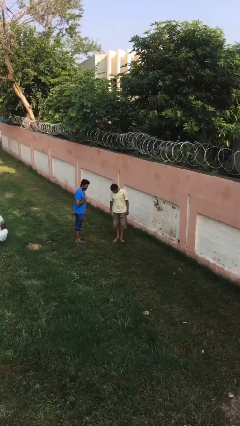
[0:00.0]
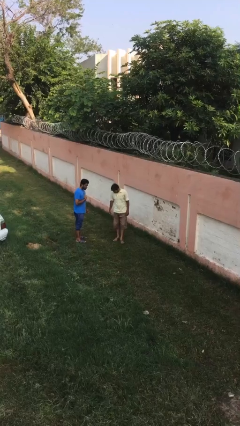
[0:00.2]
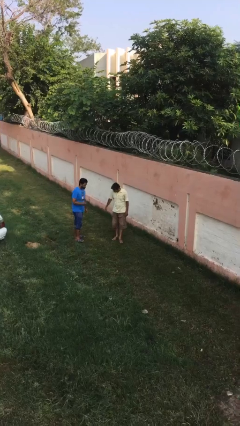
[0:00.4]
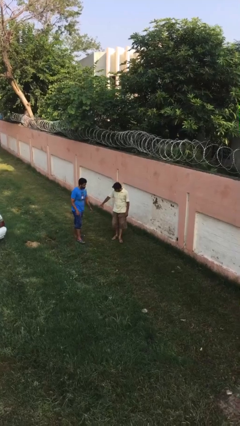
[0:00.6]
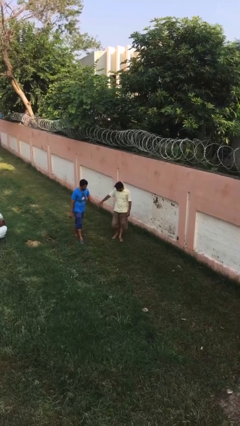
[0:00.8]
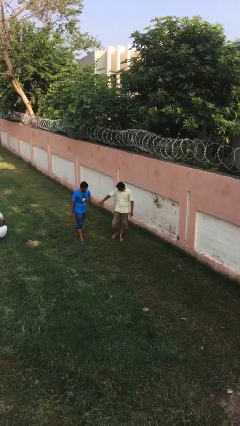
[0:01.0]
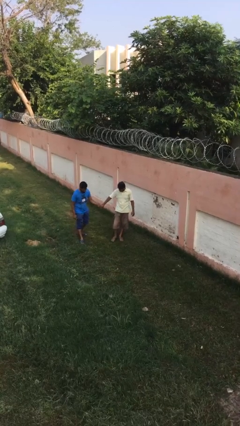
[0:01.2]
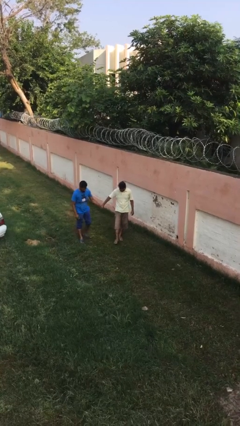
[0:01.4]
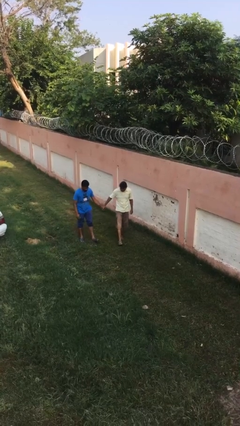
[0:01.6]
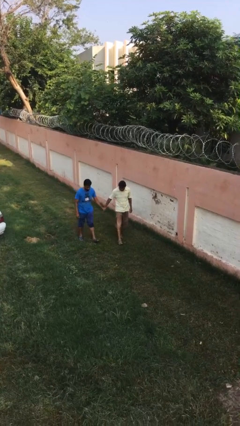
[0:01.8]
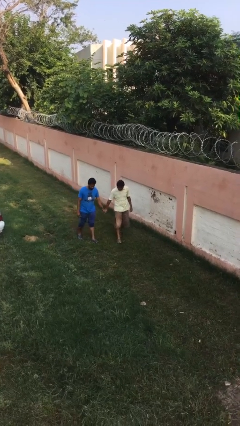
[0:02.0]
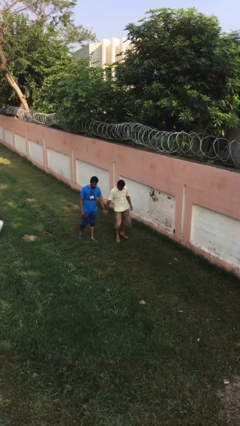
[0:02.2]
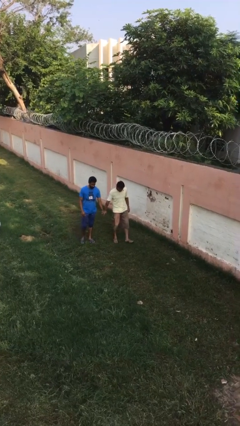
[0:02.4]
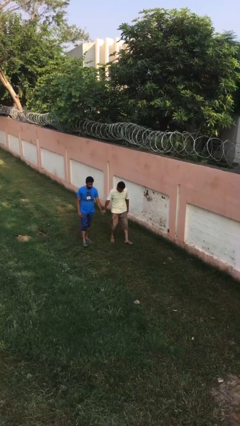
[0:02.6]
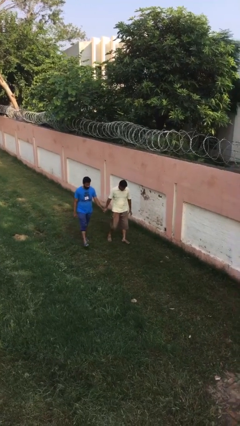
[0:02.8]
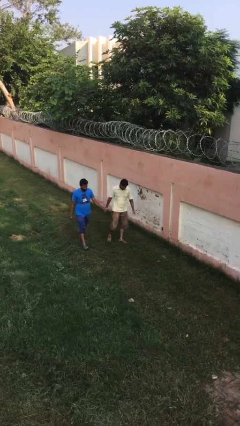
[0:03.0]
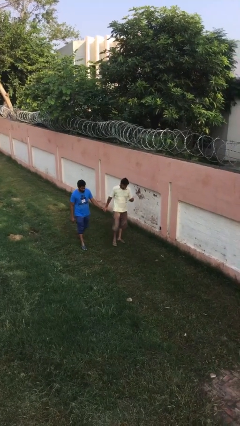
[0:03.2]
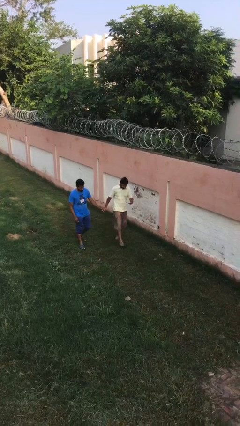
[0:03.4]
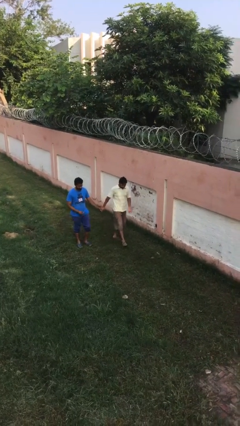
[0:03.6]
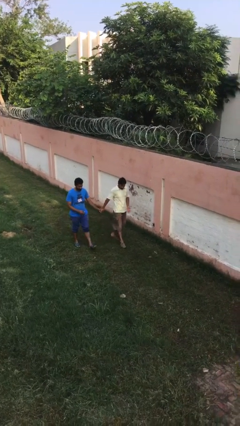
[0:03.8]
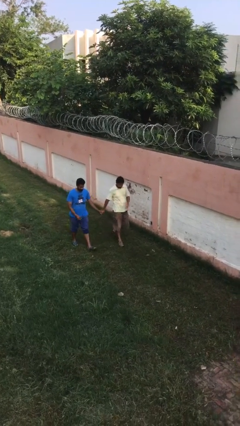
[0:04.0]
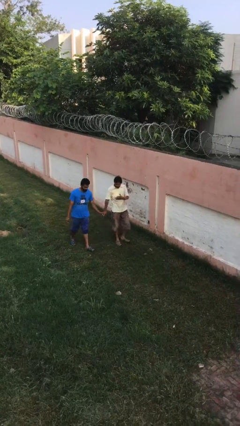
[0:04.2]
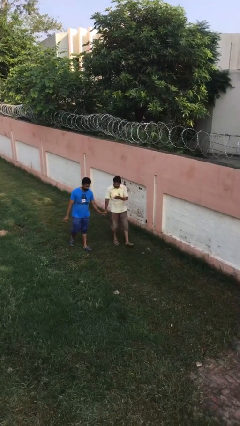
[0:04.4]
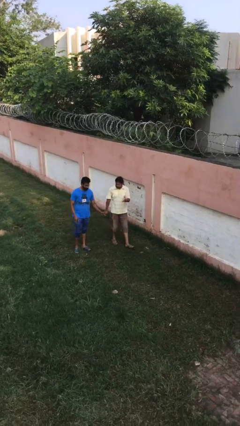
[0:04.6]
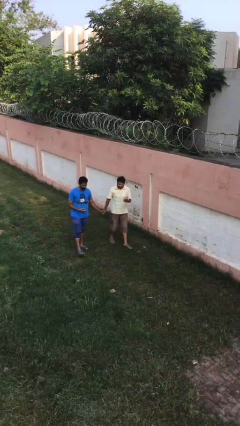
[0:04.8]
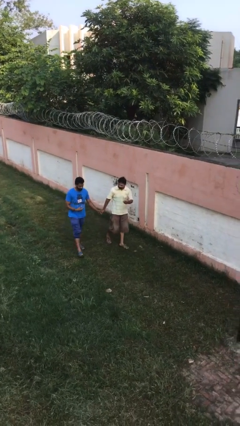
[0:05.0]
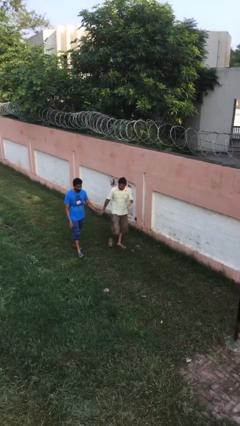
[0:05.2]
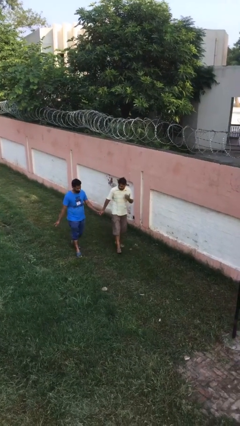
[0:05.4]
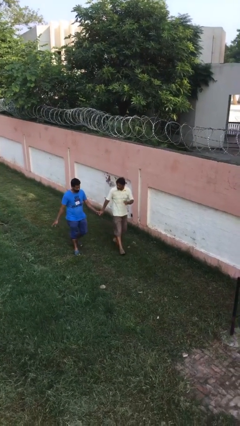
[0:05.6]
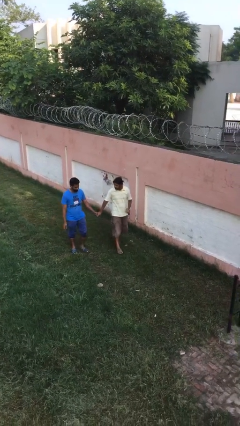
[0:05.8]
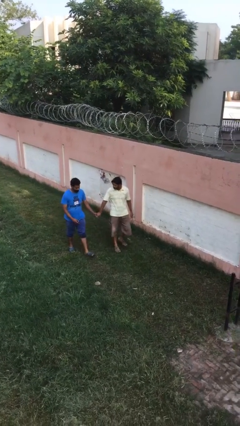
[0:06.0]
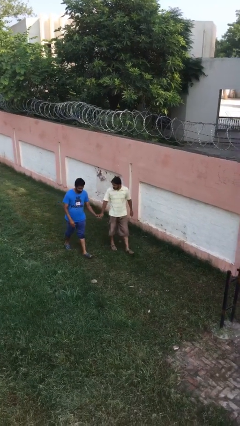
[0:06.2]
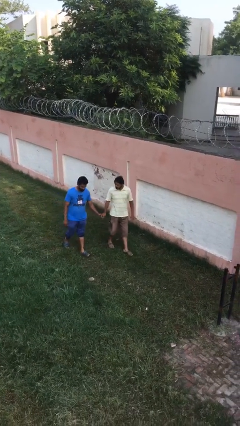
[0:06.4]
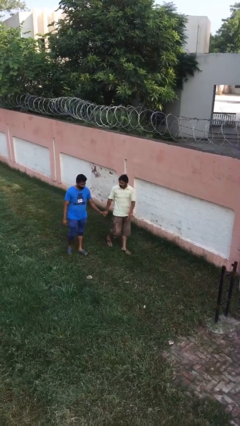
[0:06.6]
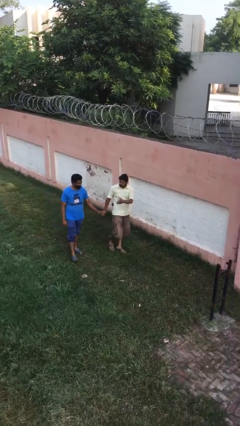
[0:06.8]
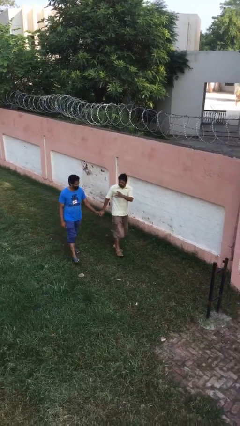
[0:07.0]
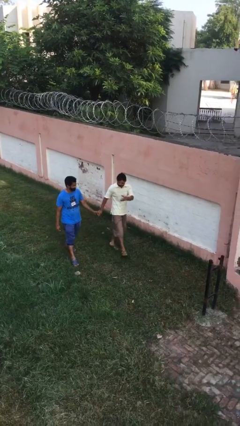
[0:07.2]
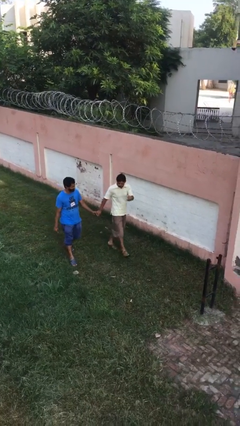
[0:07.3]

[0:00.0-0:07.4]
person holds hand

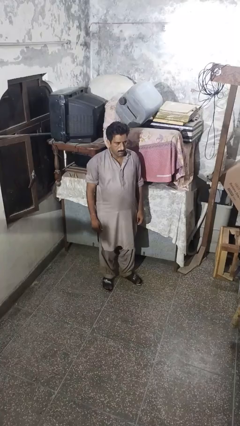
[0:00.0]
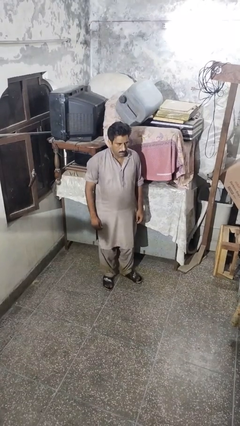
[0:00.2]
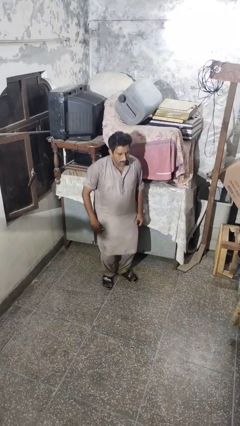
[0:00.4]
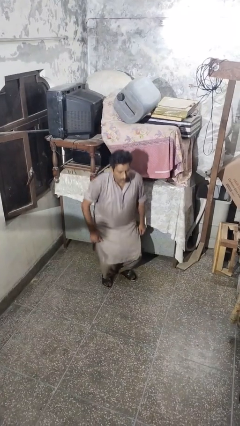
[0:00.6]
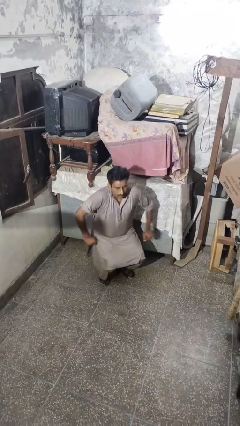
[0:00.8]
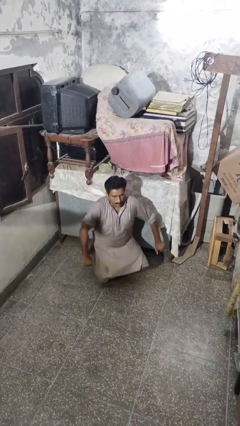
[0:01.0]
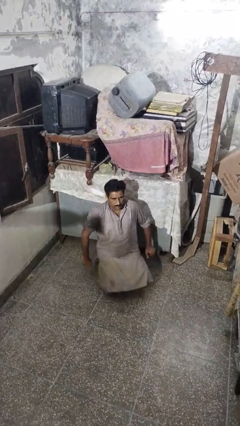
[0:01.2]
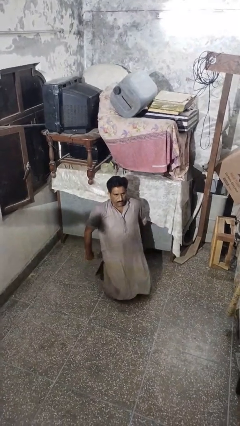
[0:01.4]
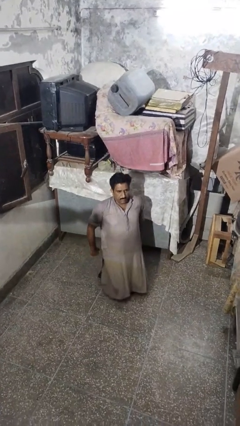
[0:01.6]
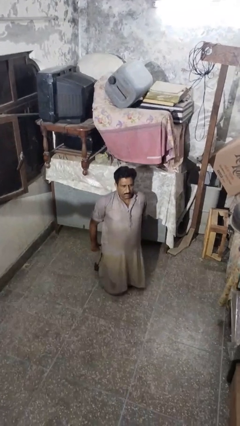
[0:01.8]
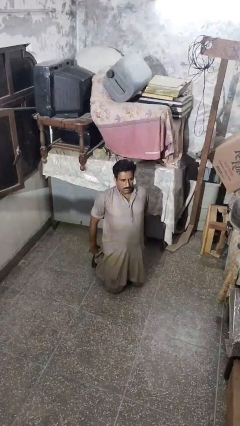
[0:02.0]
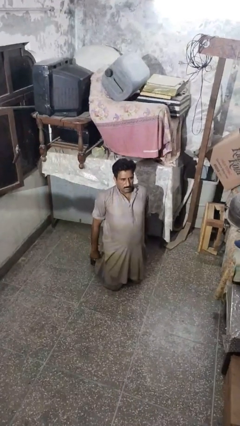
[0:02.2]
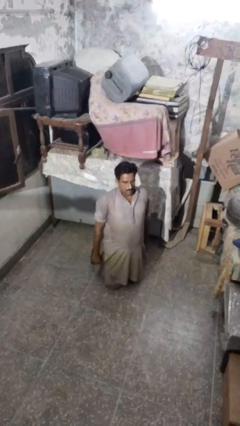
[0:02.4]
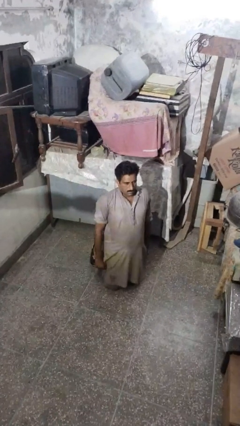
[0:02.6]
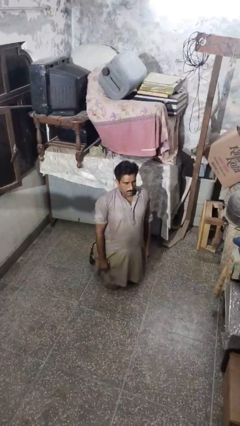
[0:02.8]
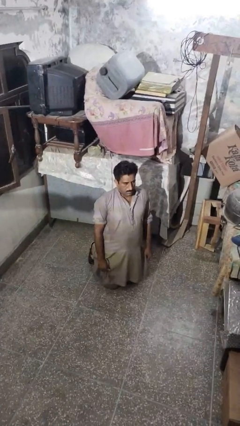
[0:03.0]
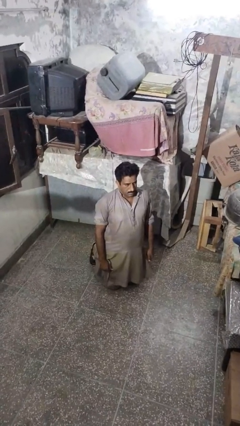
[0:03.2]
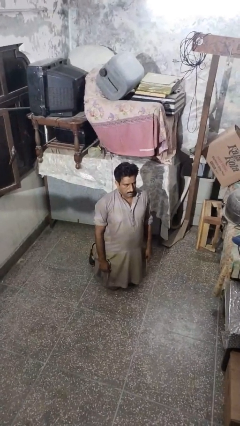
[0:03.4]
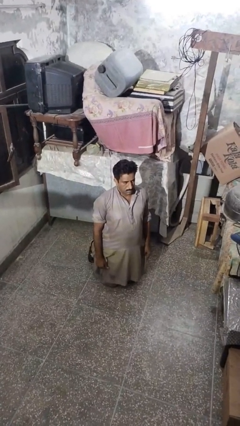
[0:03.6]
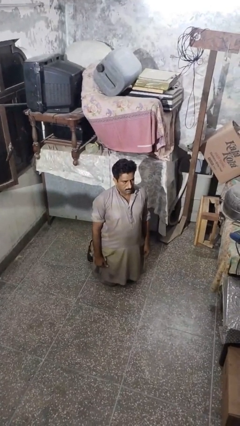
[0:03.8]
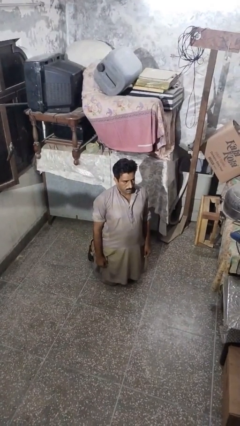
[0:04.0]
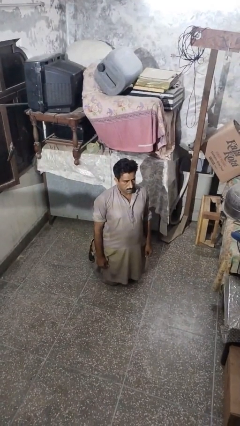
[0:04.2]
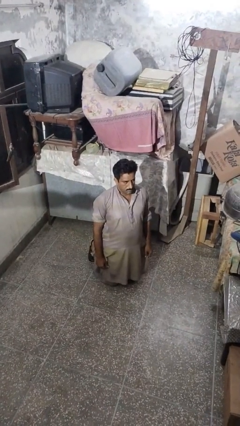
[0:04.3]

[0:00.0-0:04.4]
person kneels

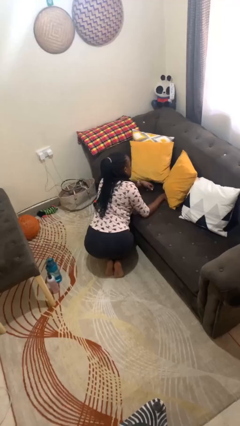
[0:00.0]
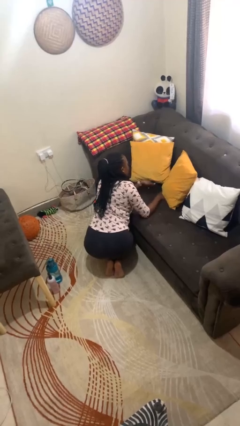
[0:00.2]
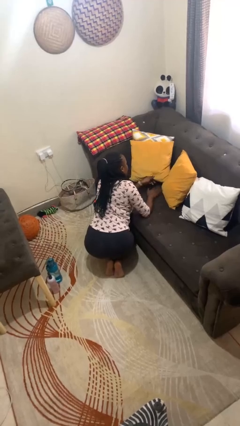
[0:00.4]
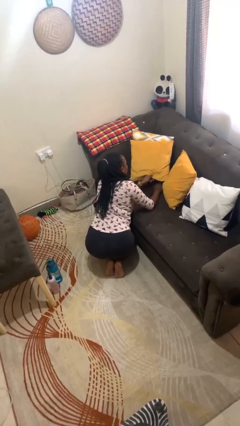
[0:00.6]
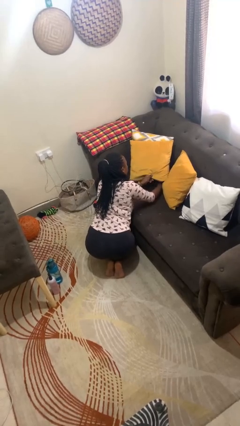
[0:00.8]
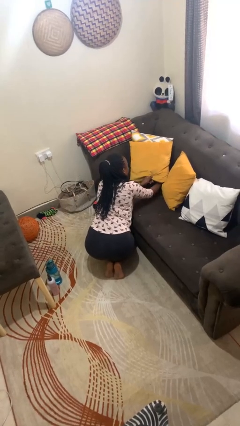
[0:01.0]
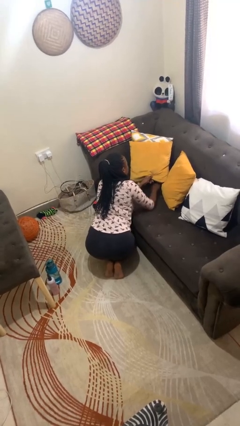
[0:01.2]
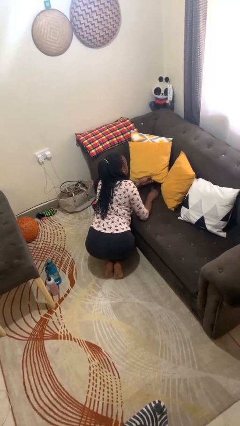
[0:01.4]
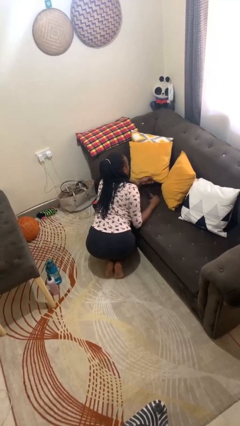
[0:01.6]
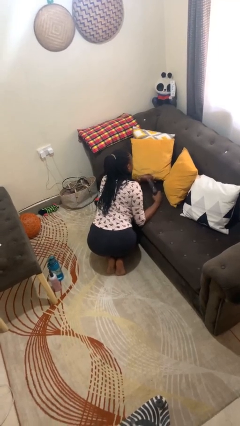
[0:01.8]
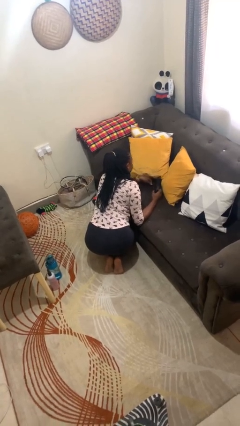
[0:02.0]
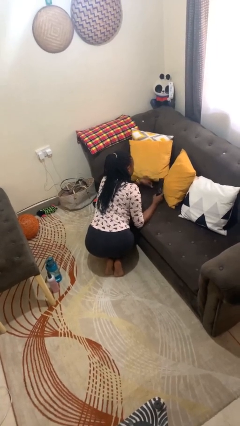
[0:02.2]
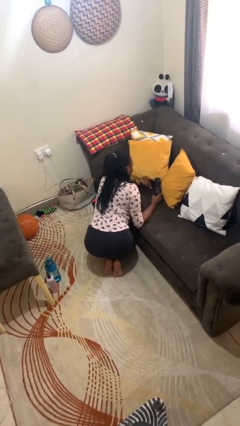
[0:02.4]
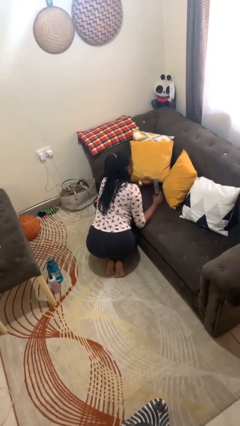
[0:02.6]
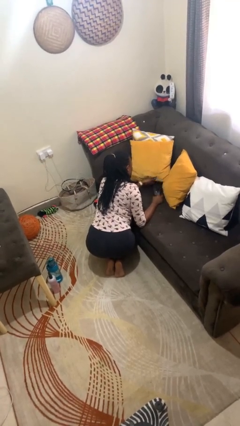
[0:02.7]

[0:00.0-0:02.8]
person searches in couch

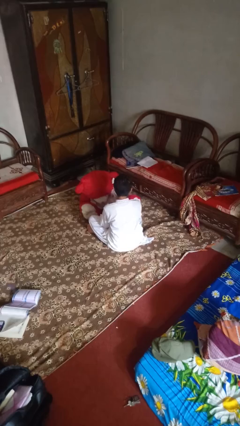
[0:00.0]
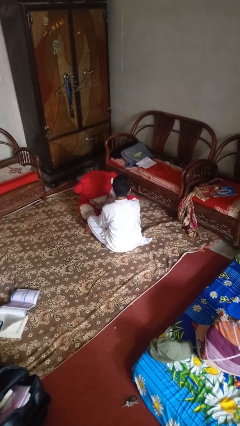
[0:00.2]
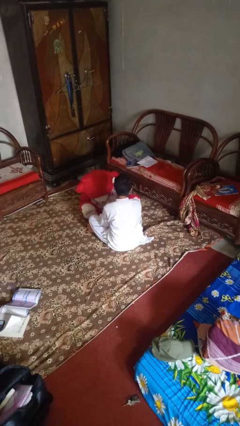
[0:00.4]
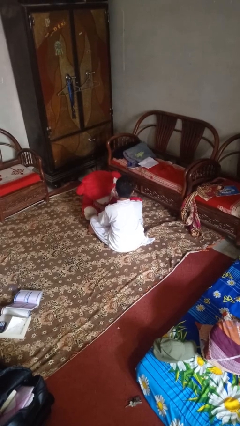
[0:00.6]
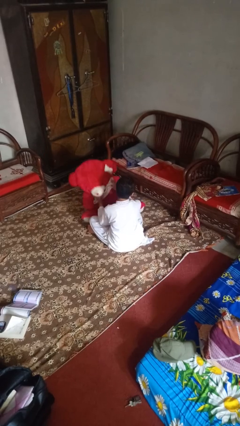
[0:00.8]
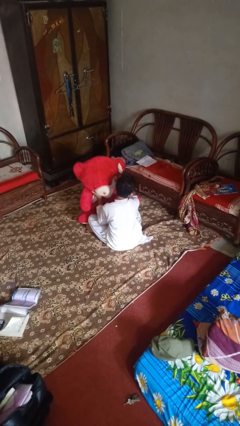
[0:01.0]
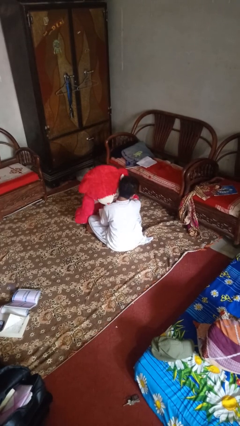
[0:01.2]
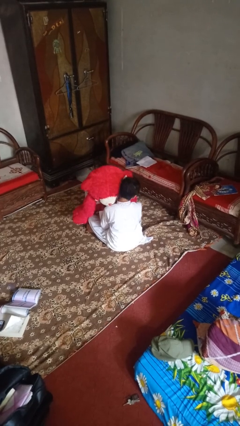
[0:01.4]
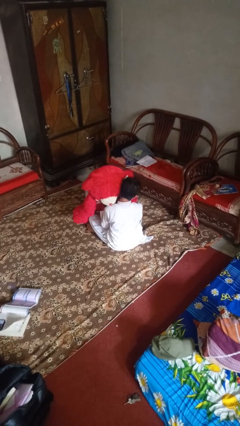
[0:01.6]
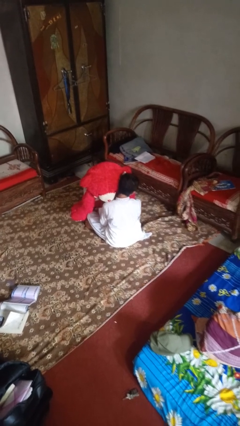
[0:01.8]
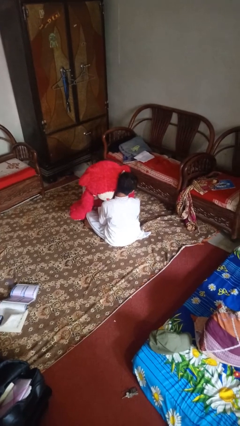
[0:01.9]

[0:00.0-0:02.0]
person hugs stuffed animal

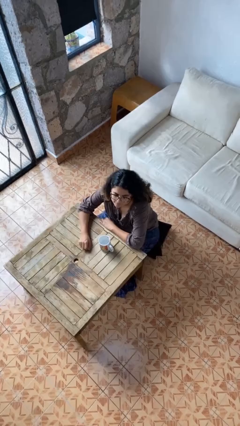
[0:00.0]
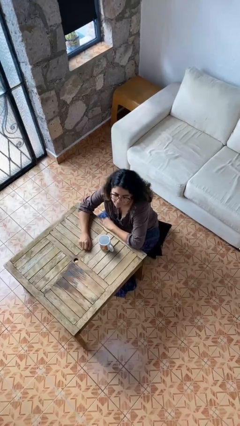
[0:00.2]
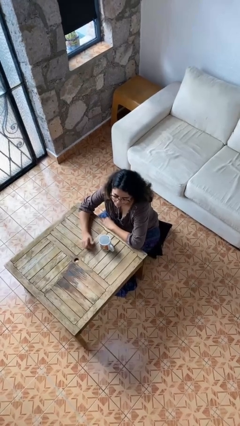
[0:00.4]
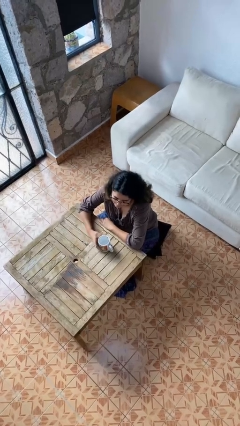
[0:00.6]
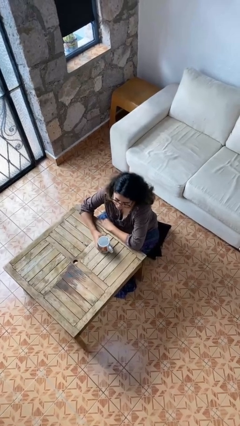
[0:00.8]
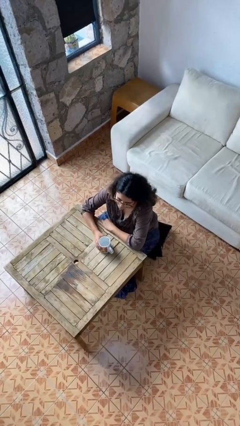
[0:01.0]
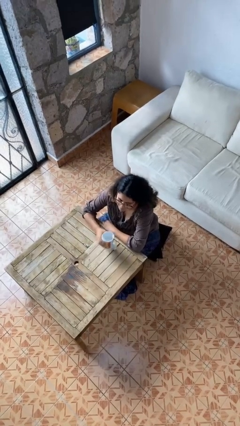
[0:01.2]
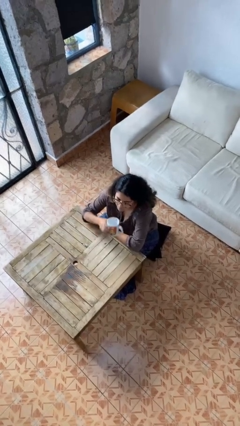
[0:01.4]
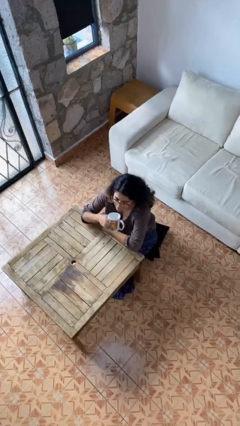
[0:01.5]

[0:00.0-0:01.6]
person picks up object from table
